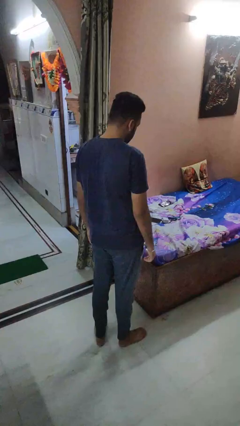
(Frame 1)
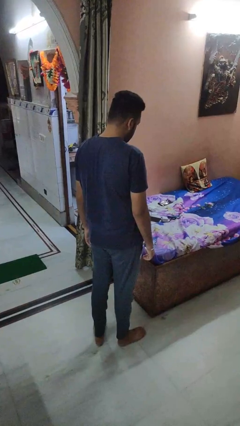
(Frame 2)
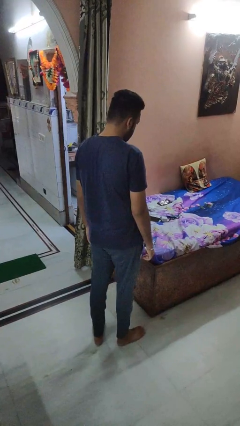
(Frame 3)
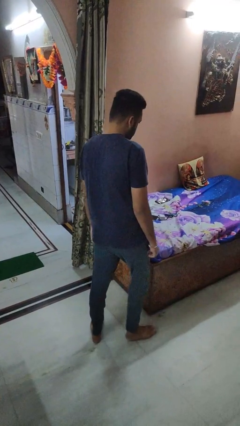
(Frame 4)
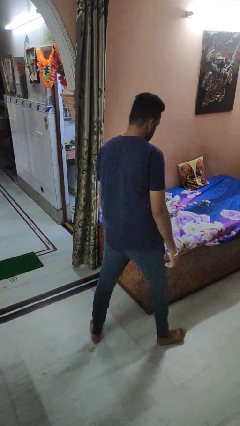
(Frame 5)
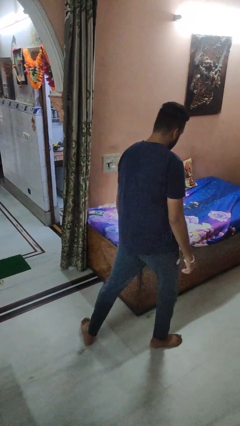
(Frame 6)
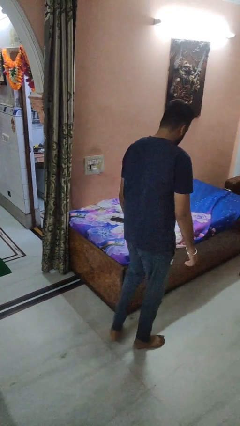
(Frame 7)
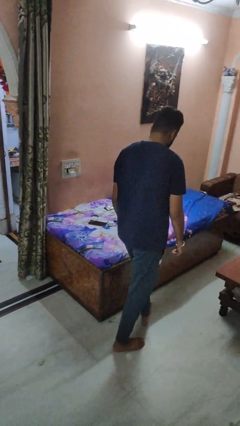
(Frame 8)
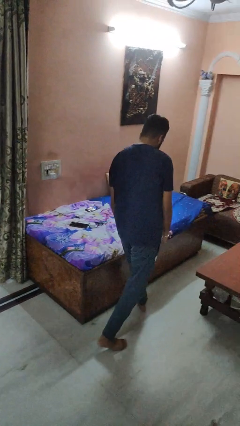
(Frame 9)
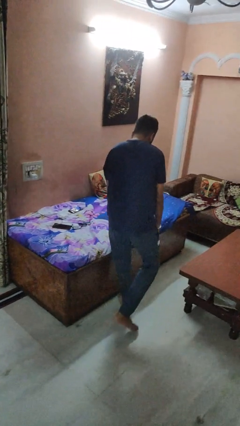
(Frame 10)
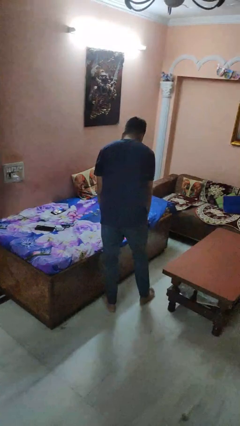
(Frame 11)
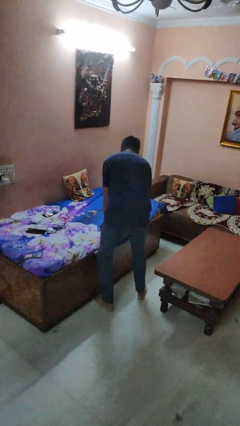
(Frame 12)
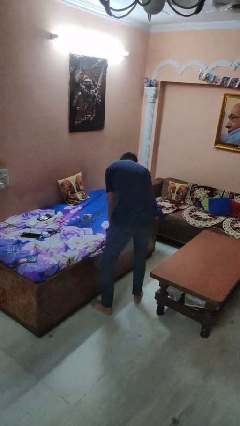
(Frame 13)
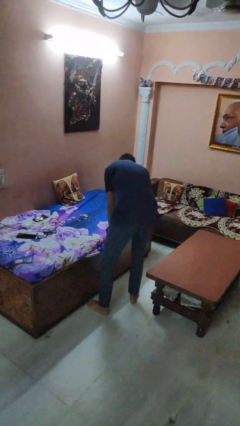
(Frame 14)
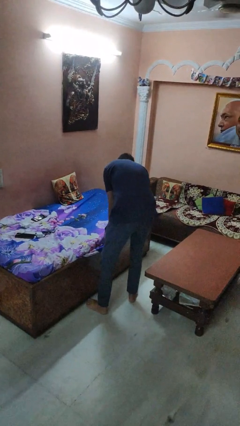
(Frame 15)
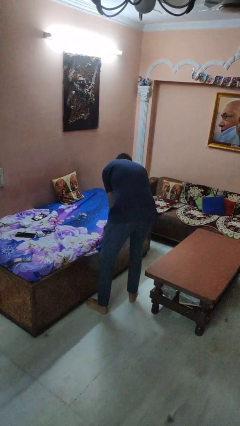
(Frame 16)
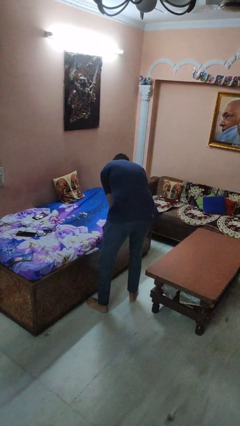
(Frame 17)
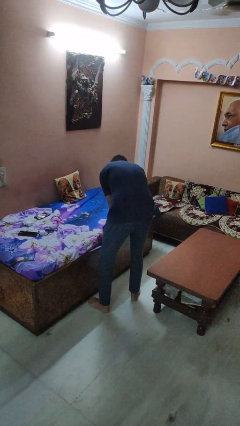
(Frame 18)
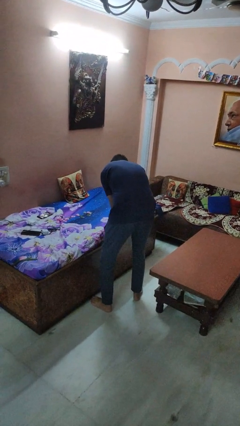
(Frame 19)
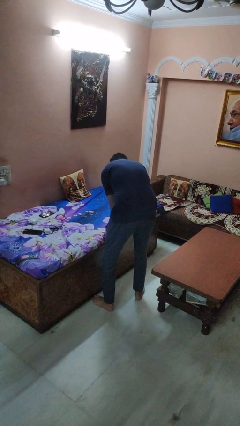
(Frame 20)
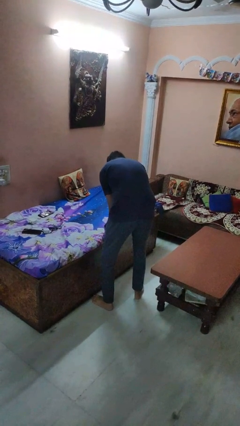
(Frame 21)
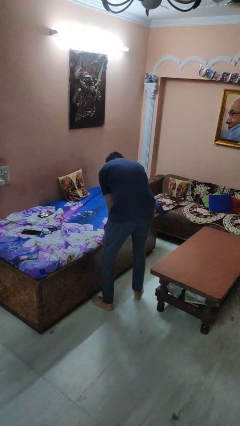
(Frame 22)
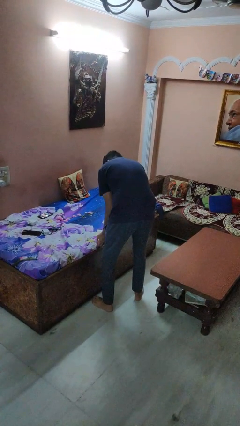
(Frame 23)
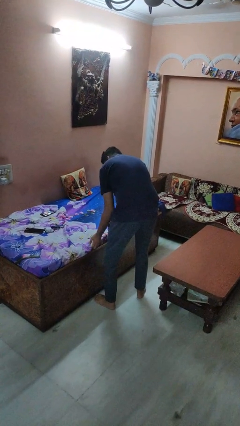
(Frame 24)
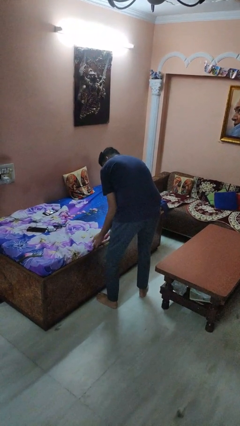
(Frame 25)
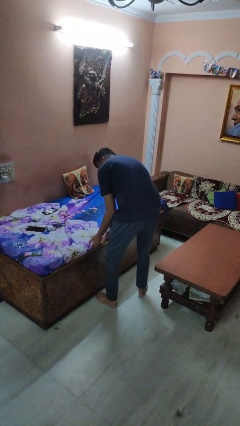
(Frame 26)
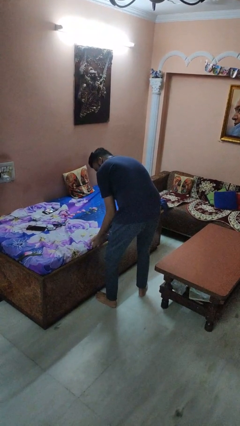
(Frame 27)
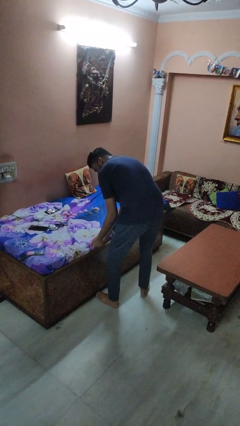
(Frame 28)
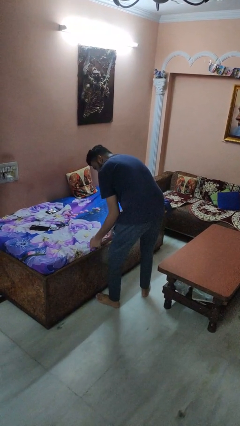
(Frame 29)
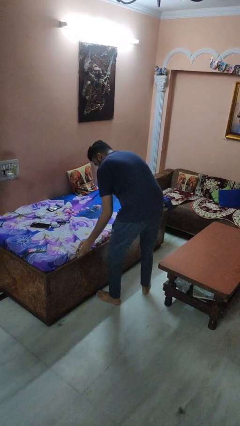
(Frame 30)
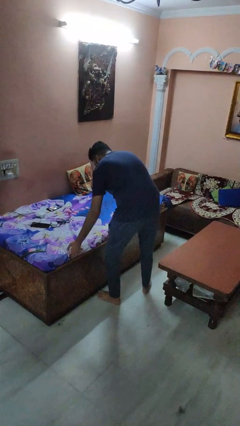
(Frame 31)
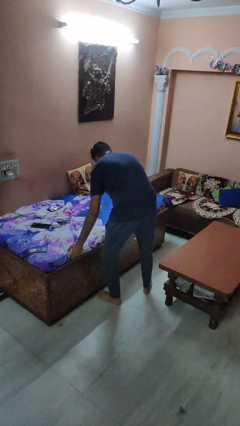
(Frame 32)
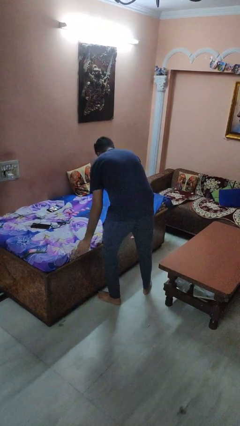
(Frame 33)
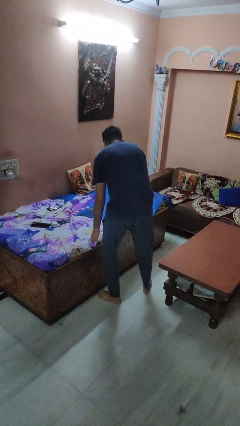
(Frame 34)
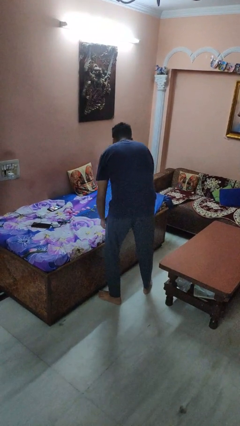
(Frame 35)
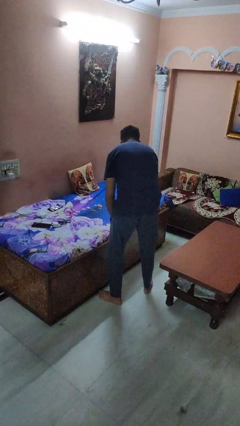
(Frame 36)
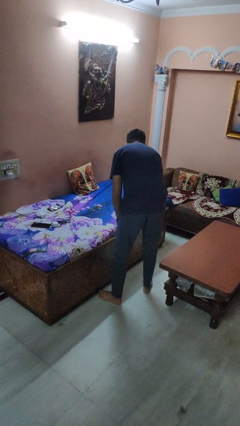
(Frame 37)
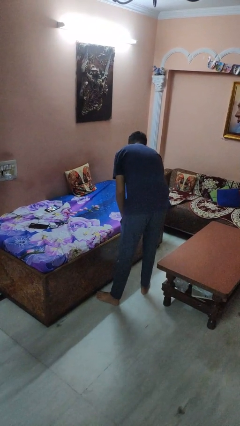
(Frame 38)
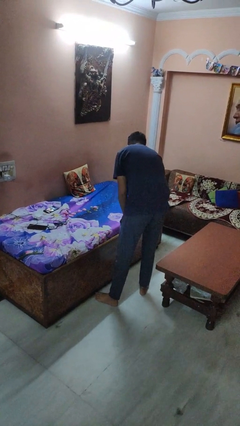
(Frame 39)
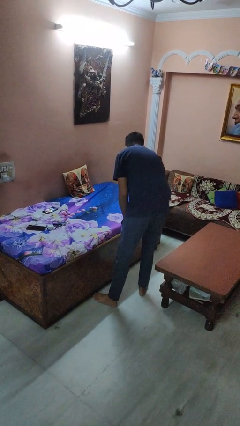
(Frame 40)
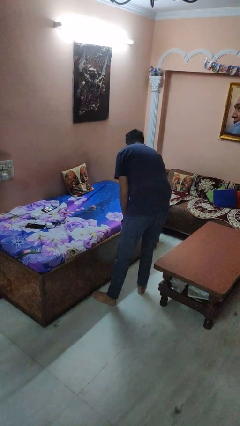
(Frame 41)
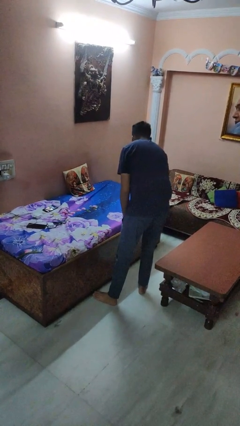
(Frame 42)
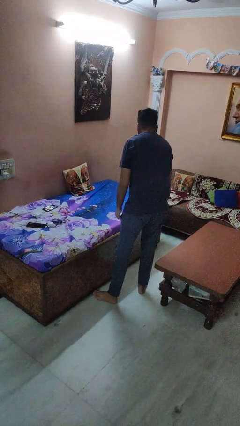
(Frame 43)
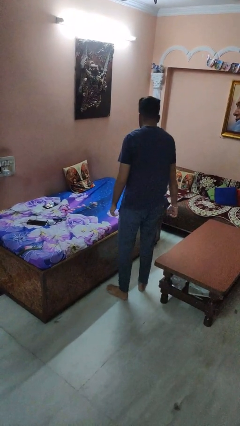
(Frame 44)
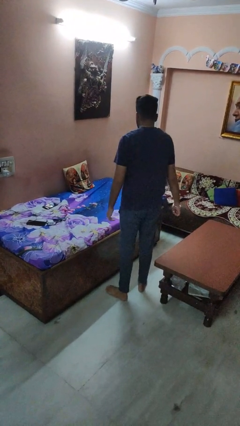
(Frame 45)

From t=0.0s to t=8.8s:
person makes bed

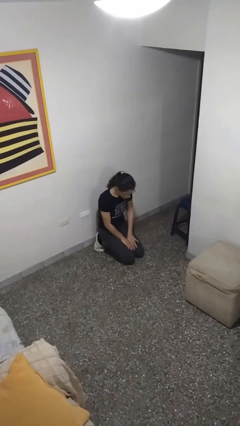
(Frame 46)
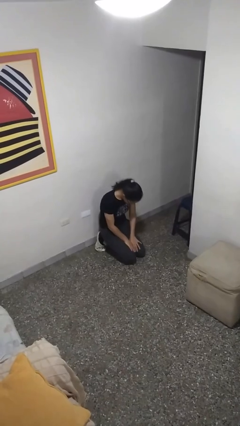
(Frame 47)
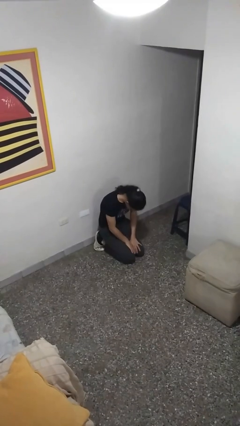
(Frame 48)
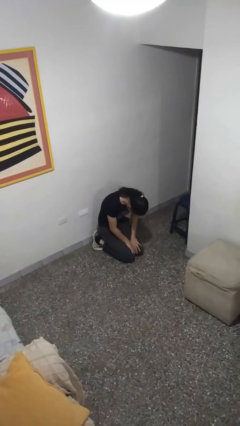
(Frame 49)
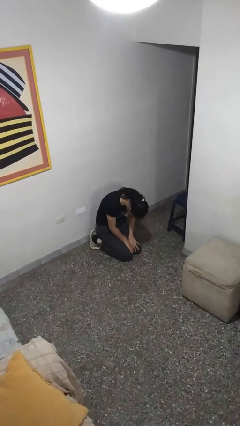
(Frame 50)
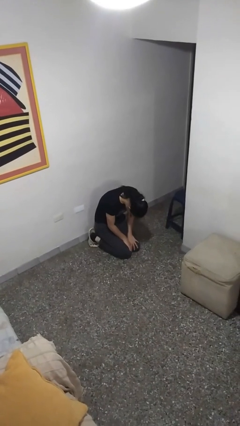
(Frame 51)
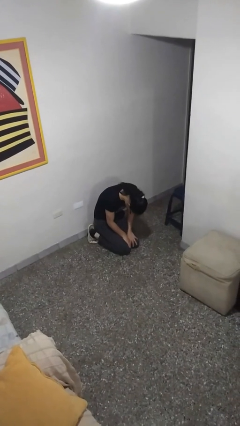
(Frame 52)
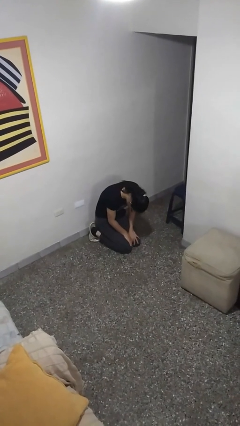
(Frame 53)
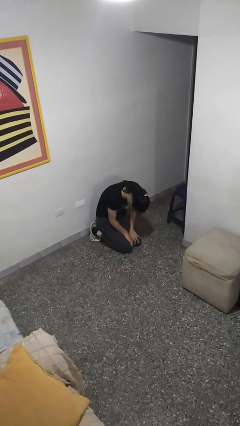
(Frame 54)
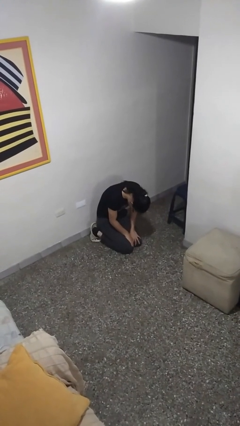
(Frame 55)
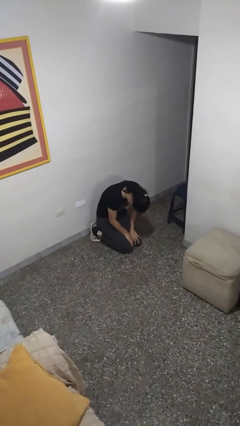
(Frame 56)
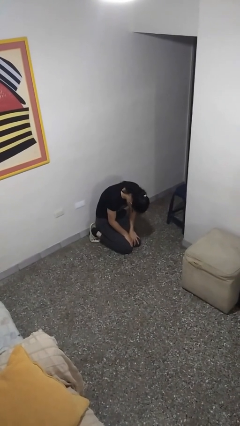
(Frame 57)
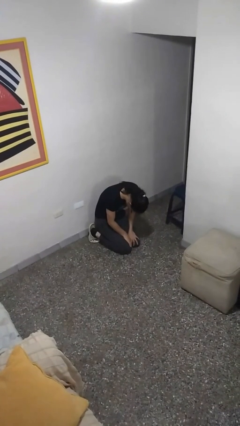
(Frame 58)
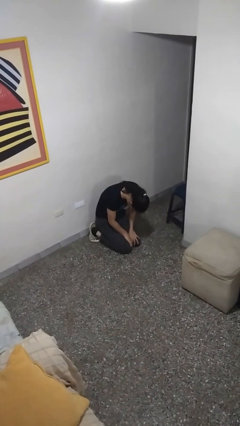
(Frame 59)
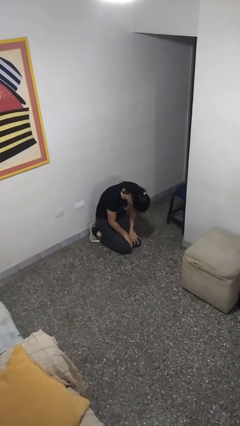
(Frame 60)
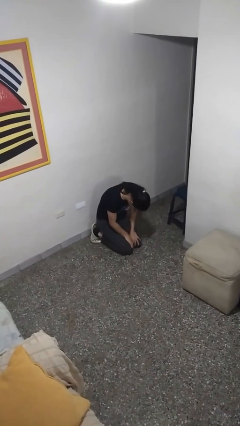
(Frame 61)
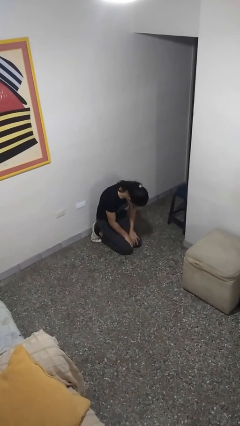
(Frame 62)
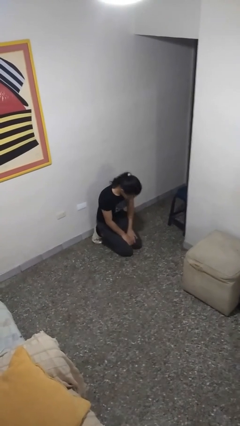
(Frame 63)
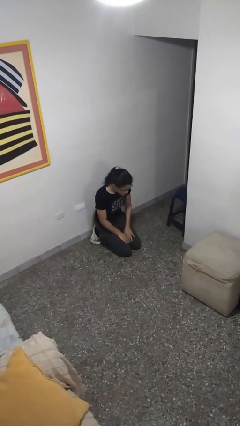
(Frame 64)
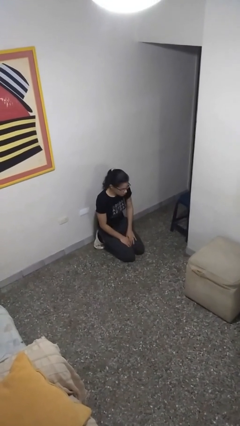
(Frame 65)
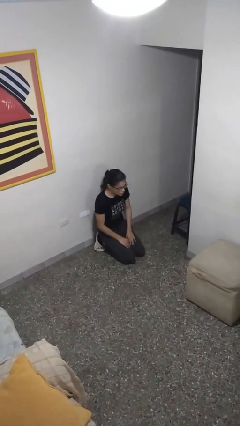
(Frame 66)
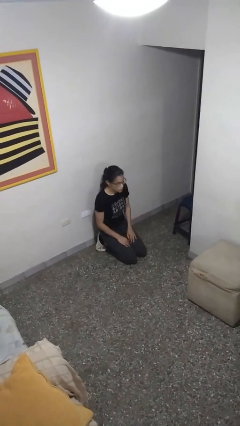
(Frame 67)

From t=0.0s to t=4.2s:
person prays

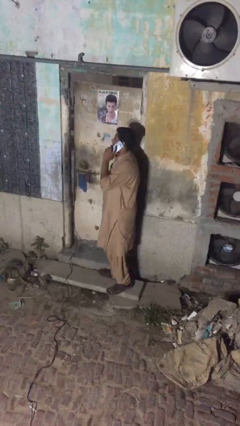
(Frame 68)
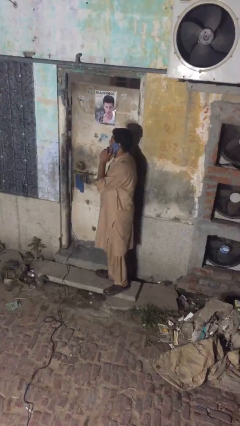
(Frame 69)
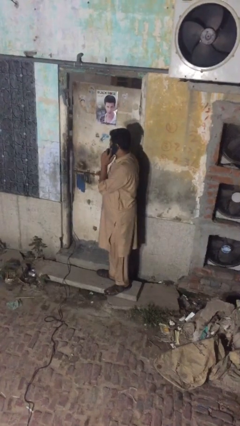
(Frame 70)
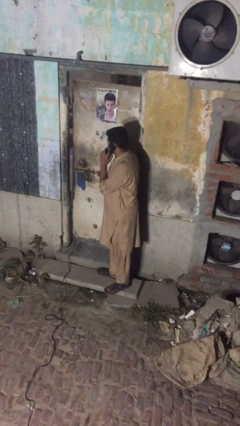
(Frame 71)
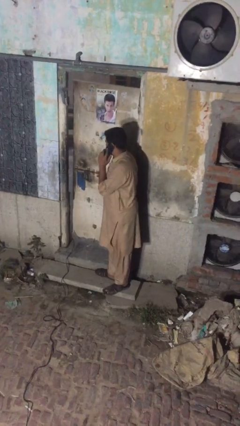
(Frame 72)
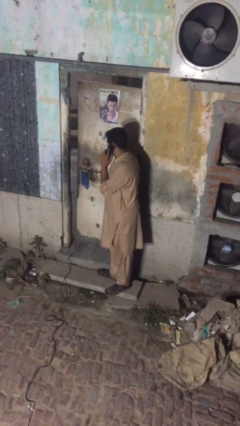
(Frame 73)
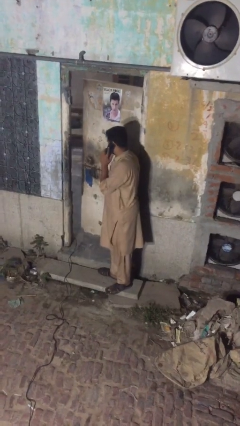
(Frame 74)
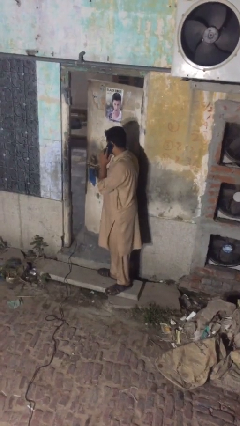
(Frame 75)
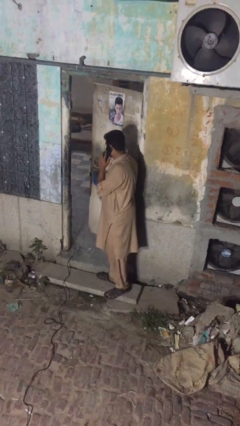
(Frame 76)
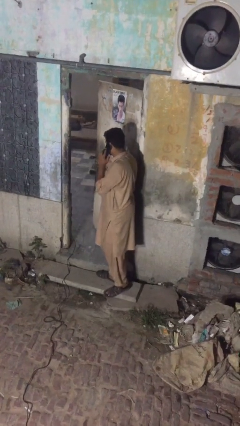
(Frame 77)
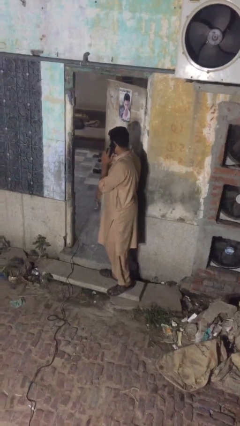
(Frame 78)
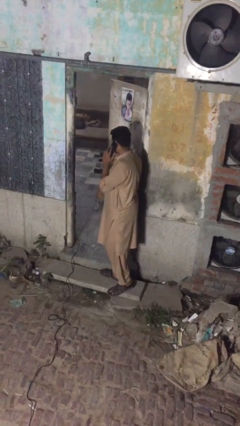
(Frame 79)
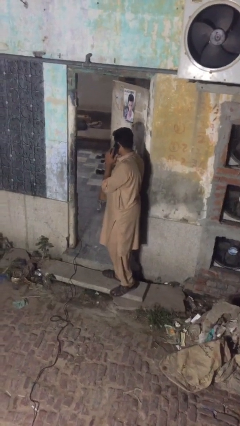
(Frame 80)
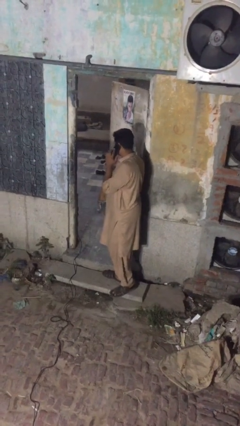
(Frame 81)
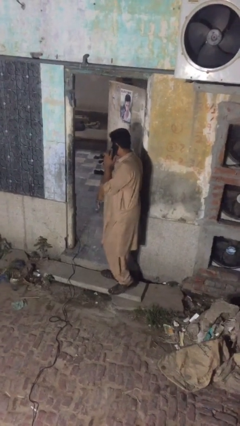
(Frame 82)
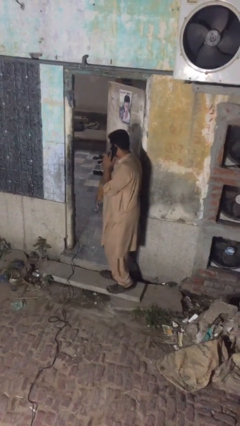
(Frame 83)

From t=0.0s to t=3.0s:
person opens facility door

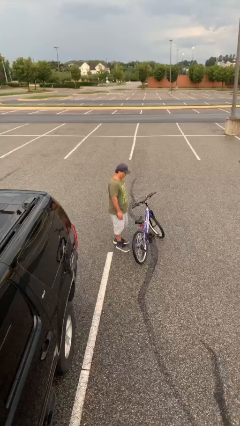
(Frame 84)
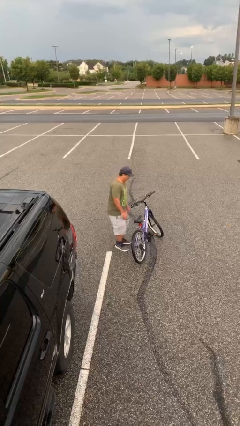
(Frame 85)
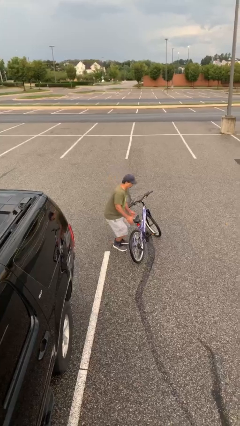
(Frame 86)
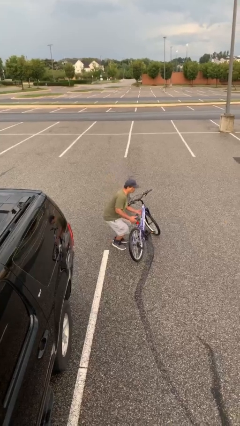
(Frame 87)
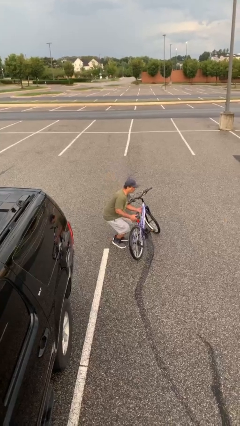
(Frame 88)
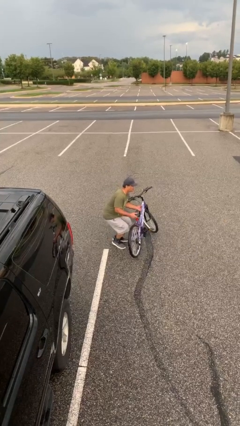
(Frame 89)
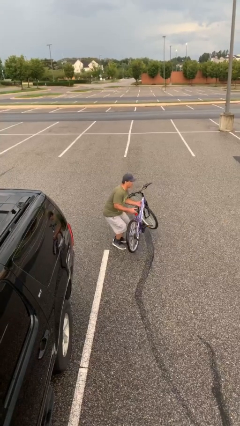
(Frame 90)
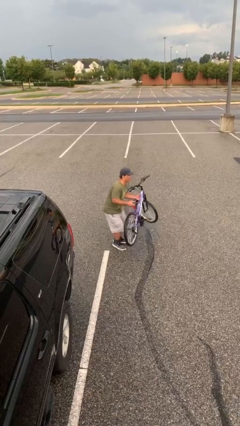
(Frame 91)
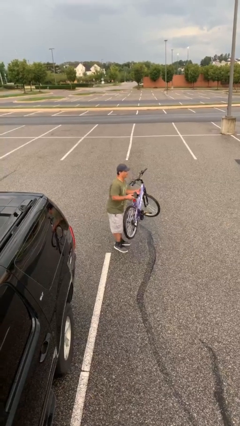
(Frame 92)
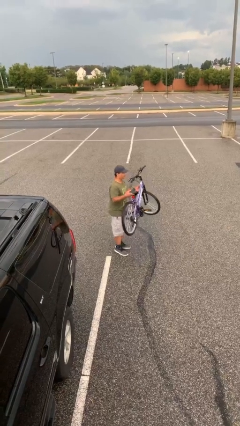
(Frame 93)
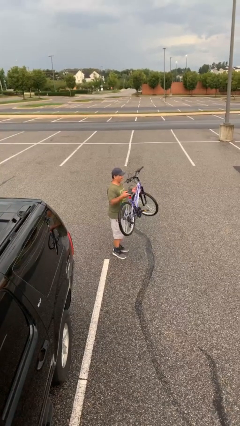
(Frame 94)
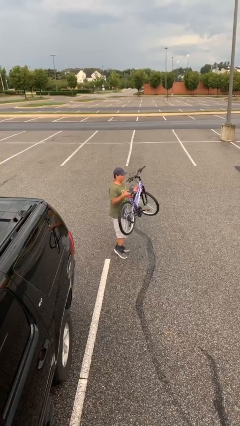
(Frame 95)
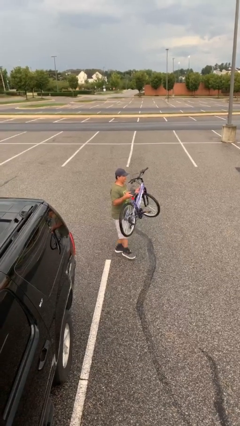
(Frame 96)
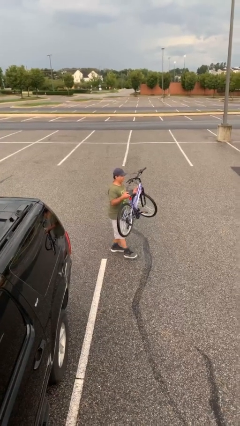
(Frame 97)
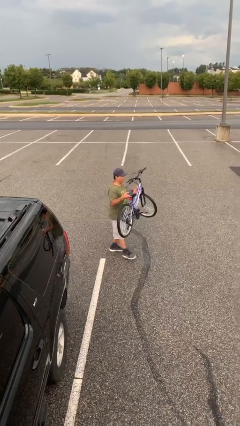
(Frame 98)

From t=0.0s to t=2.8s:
person picks up object from floor
